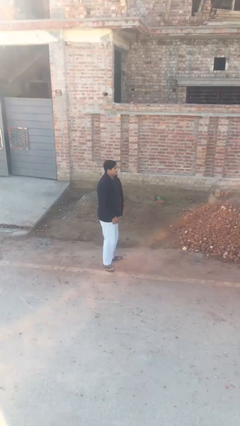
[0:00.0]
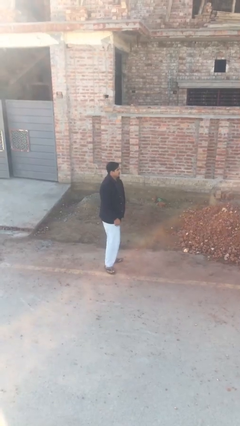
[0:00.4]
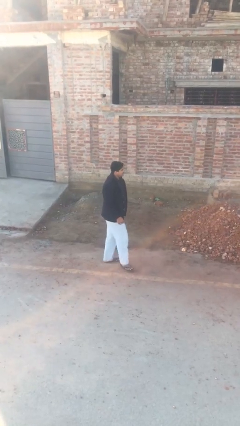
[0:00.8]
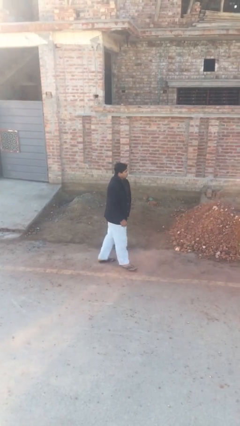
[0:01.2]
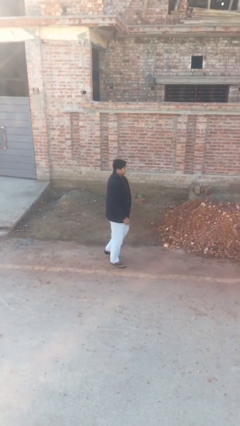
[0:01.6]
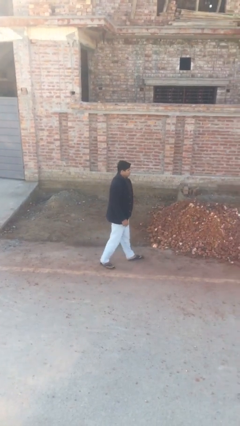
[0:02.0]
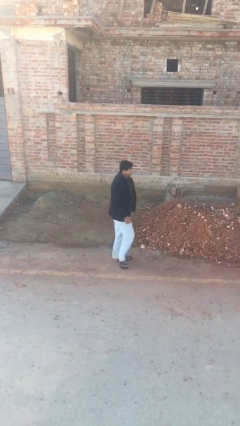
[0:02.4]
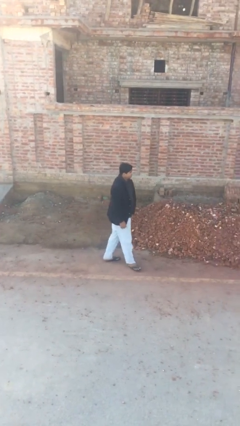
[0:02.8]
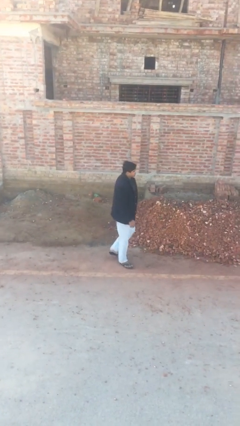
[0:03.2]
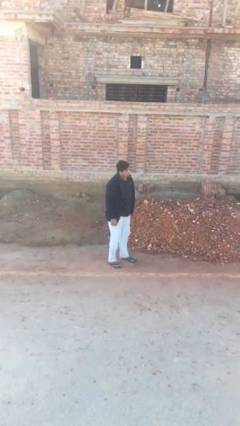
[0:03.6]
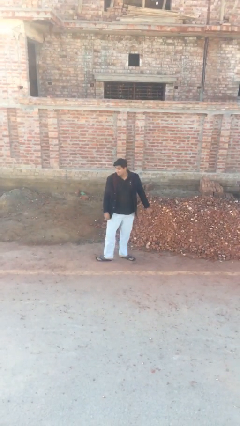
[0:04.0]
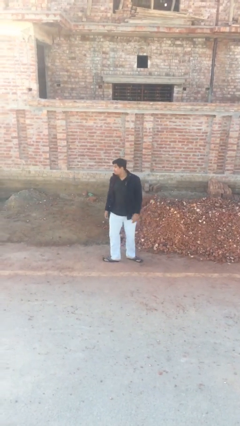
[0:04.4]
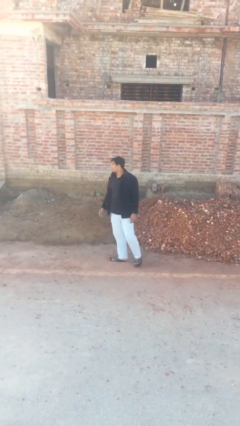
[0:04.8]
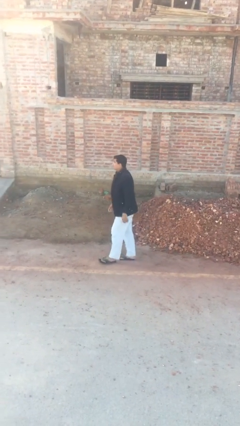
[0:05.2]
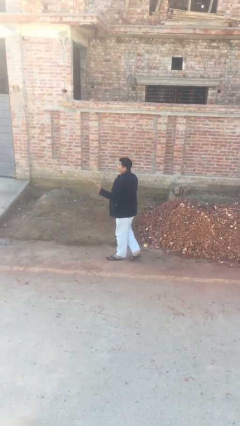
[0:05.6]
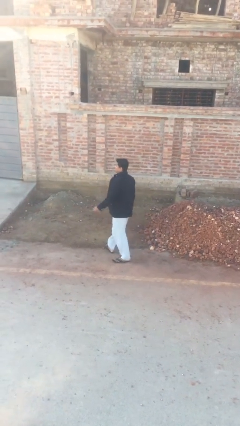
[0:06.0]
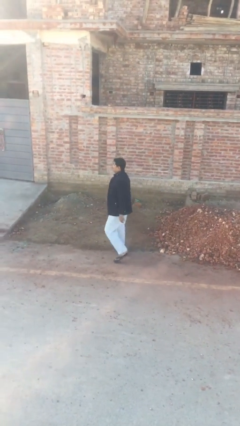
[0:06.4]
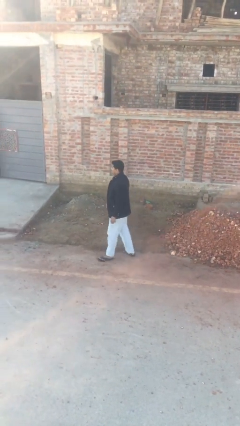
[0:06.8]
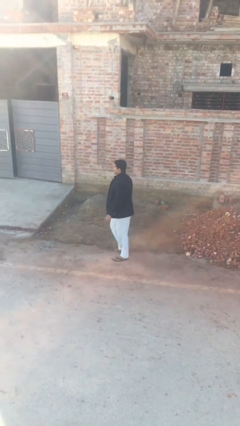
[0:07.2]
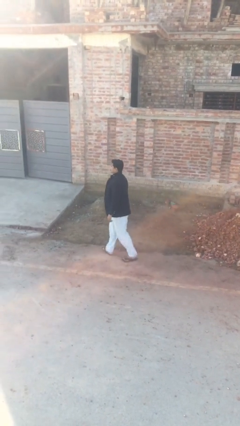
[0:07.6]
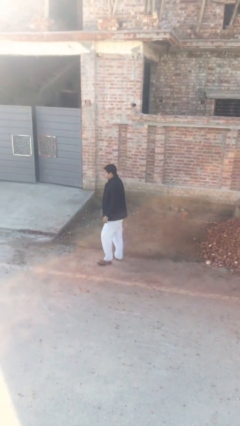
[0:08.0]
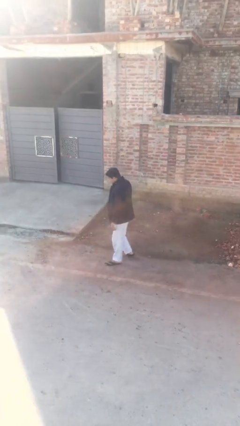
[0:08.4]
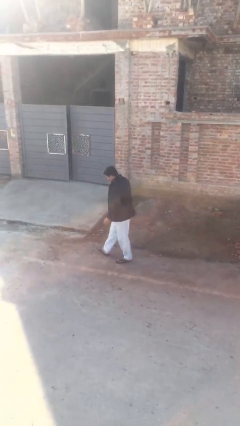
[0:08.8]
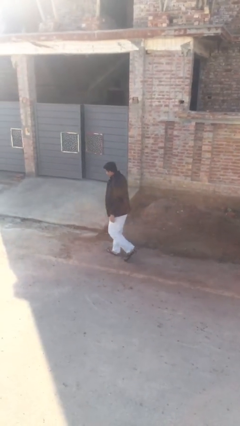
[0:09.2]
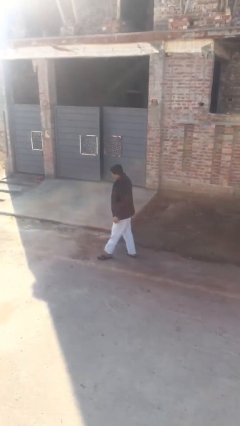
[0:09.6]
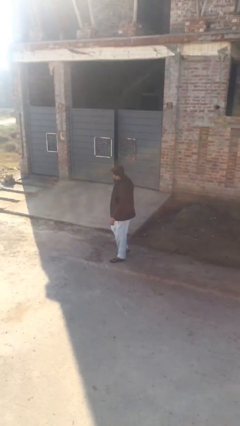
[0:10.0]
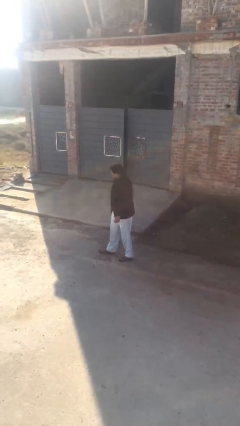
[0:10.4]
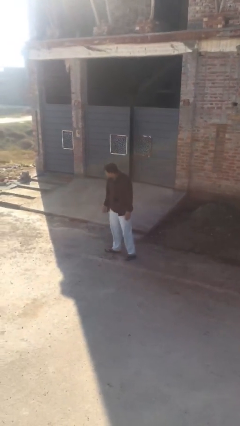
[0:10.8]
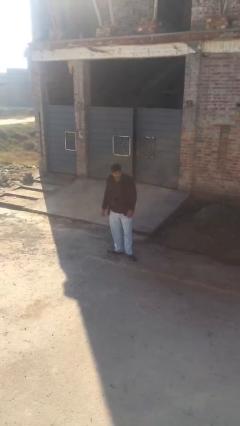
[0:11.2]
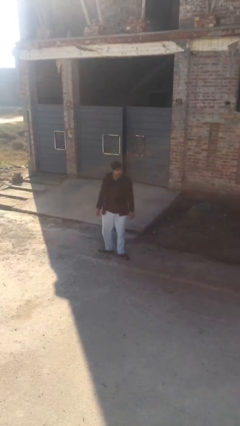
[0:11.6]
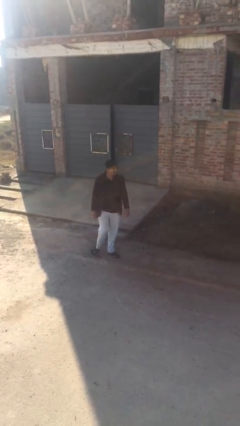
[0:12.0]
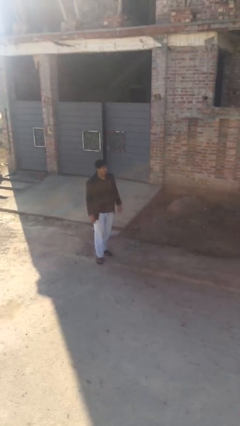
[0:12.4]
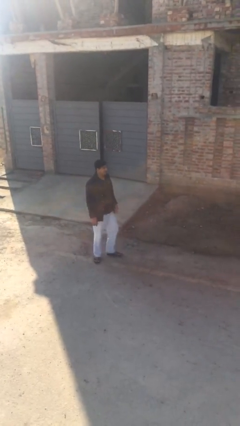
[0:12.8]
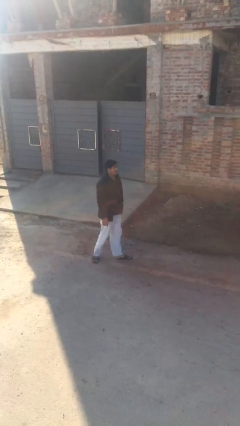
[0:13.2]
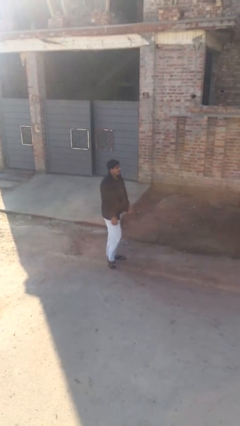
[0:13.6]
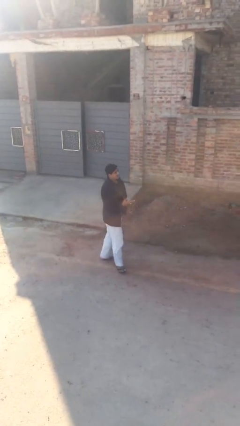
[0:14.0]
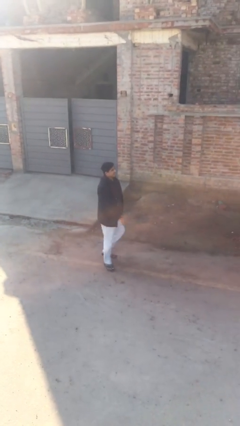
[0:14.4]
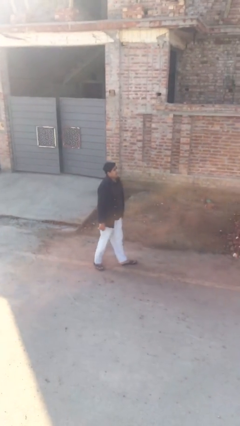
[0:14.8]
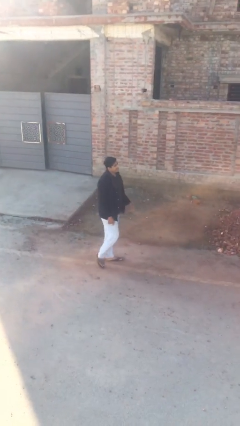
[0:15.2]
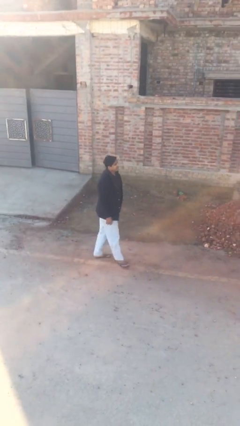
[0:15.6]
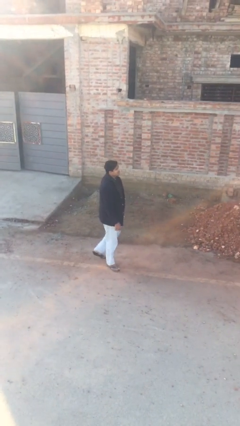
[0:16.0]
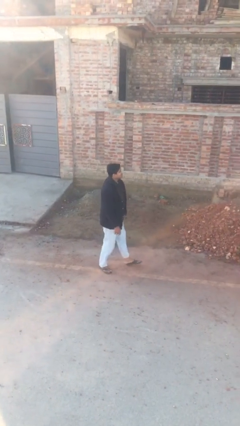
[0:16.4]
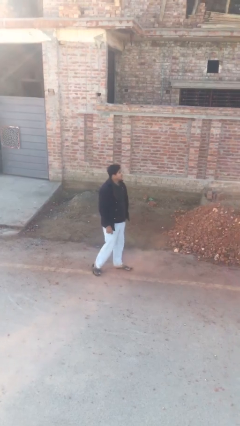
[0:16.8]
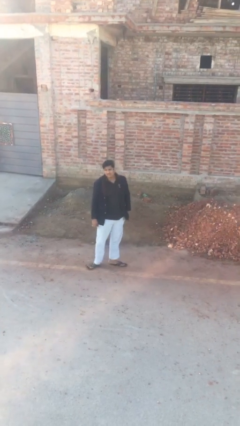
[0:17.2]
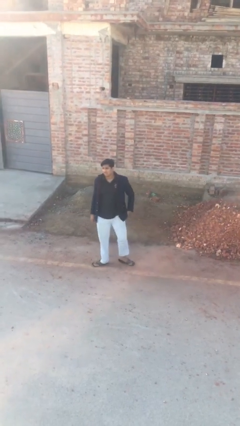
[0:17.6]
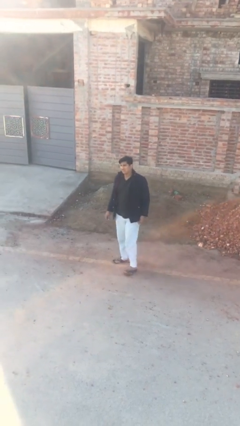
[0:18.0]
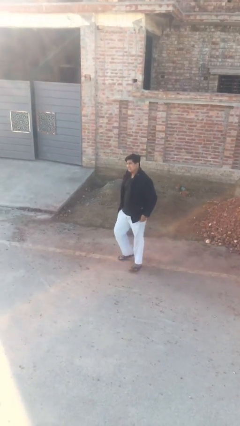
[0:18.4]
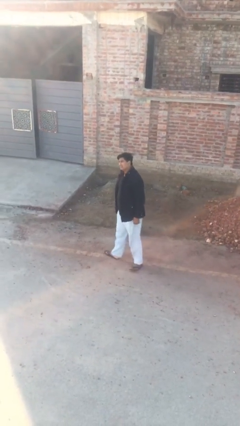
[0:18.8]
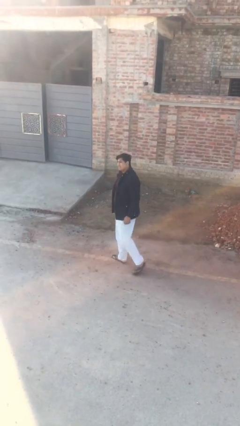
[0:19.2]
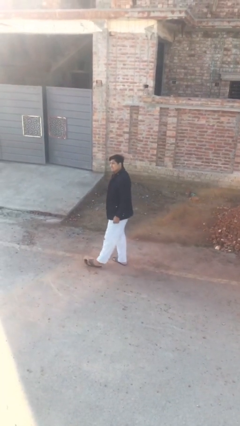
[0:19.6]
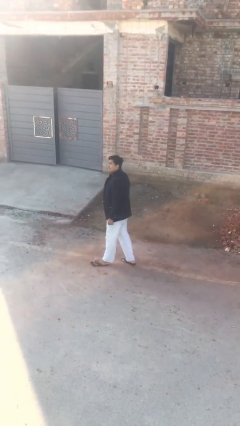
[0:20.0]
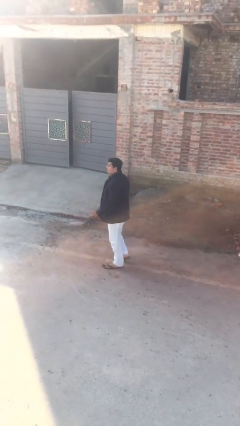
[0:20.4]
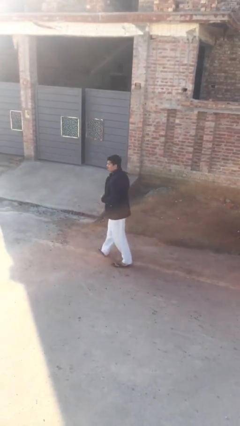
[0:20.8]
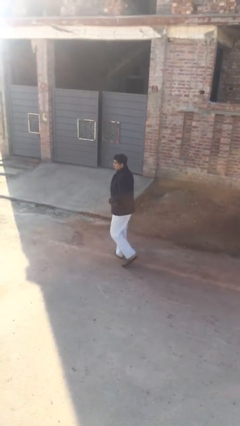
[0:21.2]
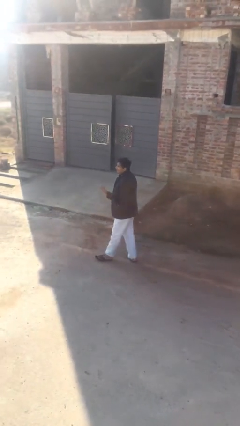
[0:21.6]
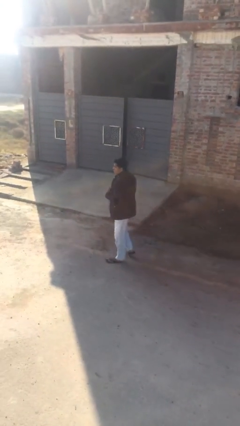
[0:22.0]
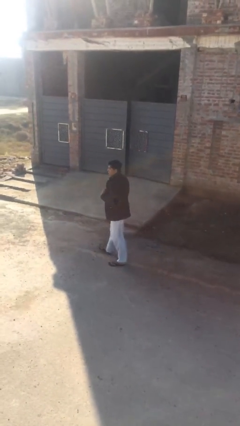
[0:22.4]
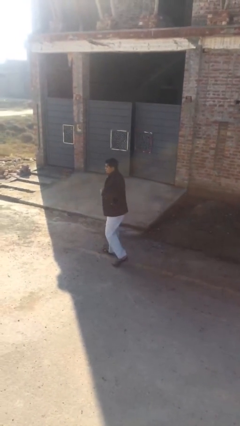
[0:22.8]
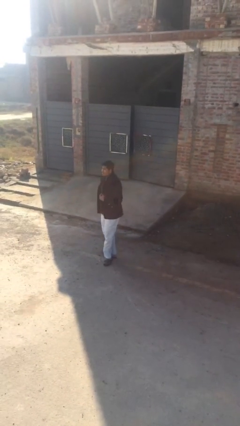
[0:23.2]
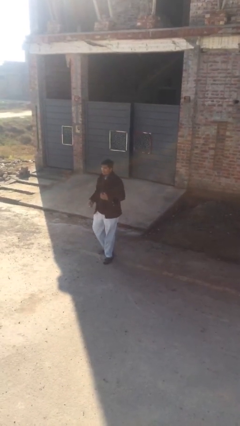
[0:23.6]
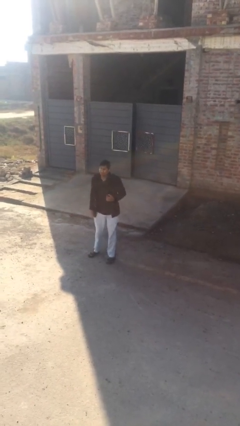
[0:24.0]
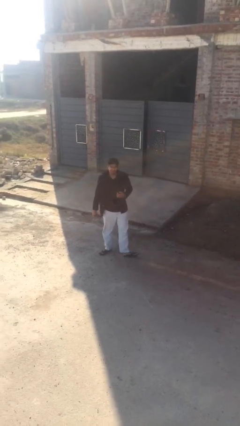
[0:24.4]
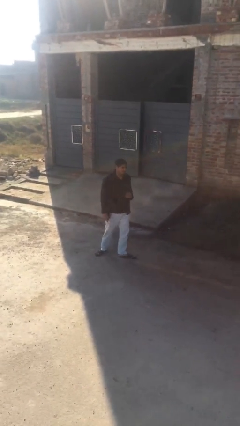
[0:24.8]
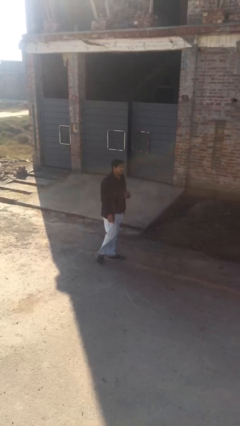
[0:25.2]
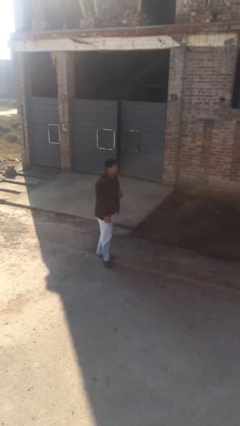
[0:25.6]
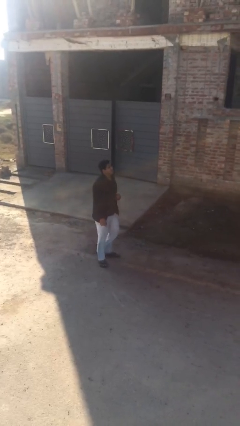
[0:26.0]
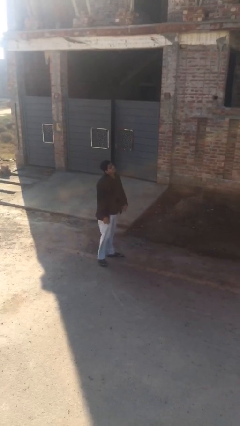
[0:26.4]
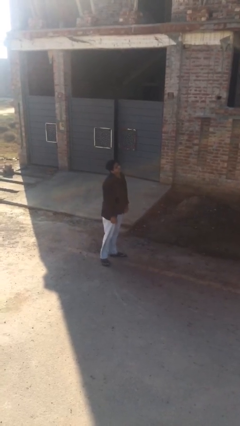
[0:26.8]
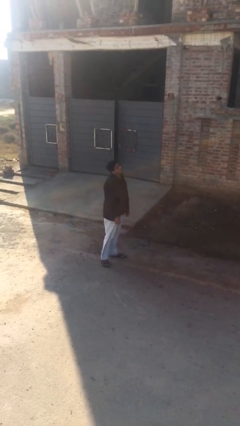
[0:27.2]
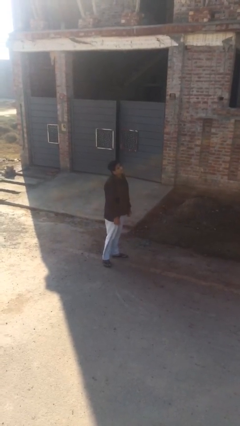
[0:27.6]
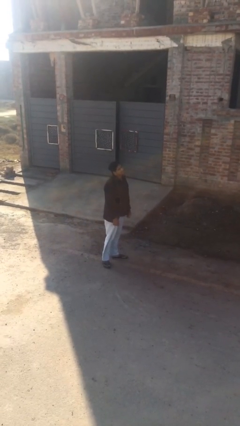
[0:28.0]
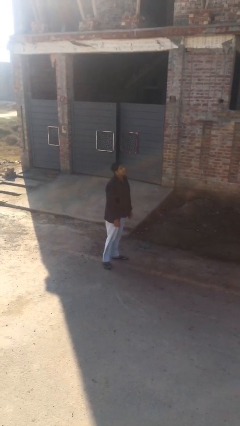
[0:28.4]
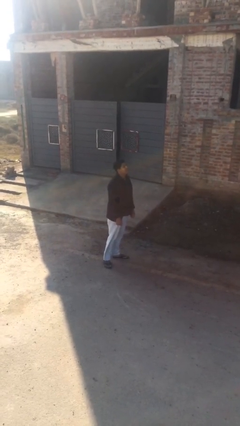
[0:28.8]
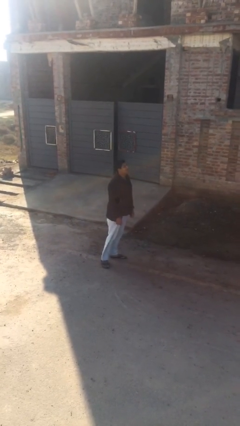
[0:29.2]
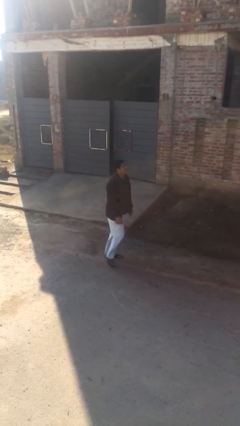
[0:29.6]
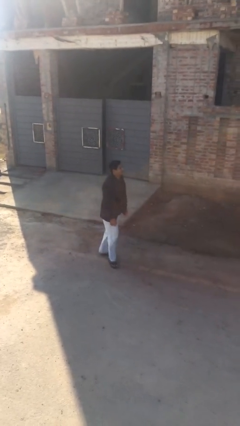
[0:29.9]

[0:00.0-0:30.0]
person walks

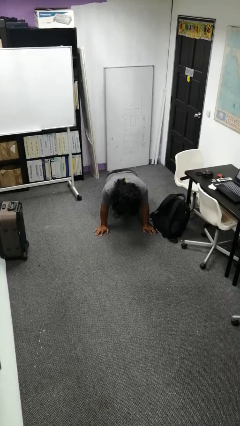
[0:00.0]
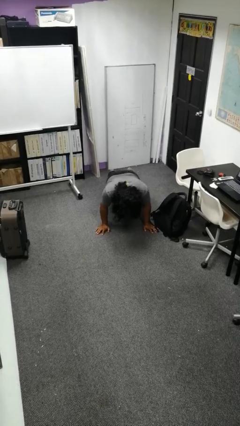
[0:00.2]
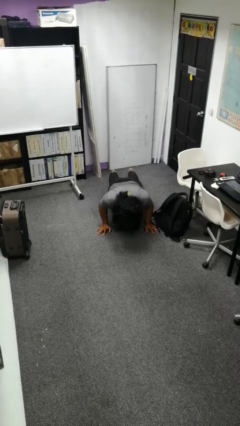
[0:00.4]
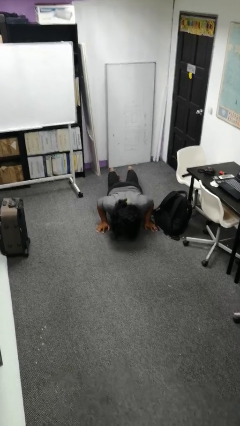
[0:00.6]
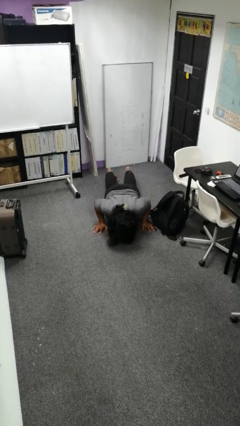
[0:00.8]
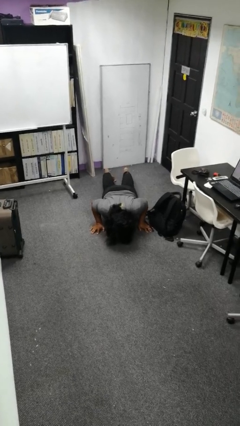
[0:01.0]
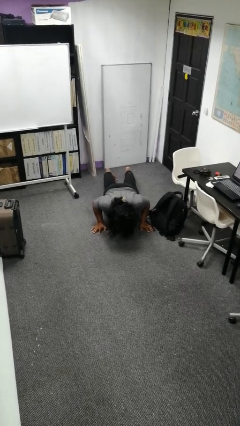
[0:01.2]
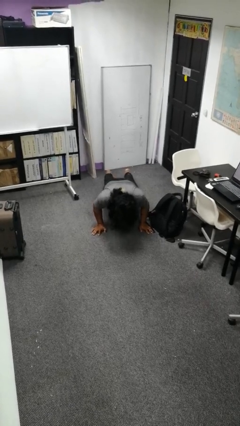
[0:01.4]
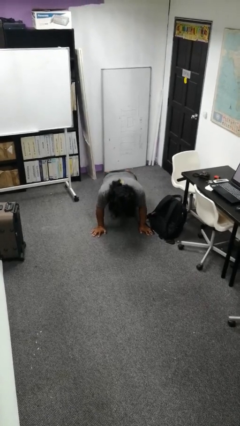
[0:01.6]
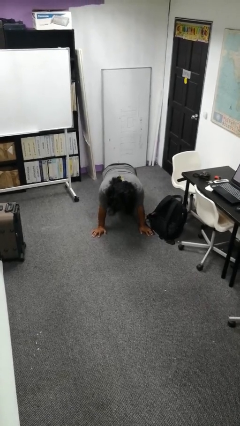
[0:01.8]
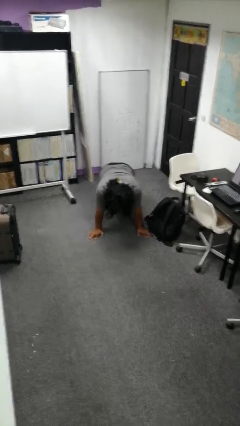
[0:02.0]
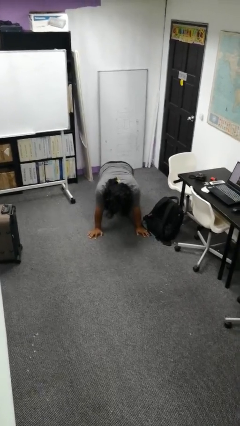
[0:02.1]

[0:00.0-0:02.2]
person exercises with pushup

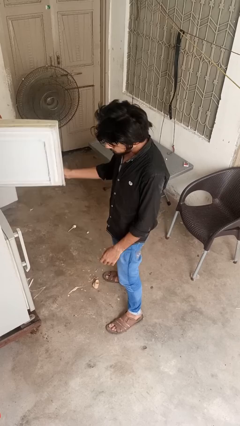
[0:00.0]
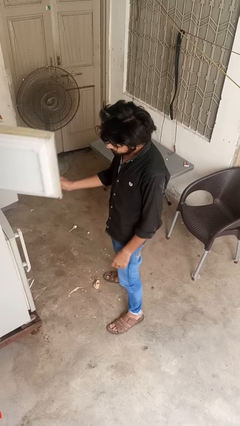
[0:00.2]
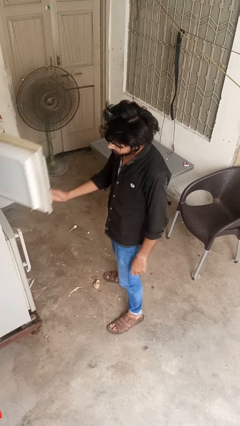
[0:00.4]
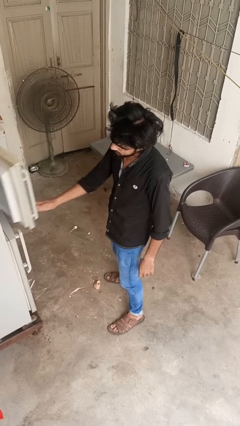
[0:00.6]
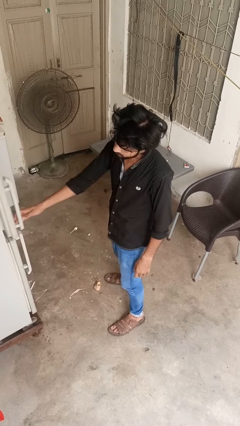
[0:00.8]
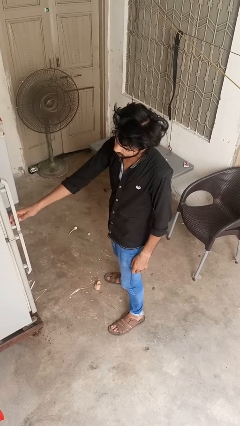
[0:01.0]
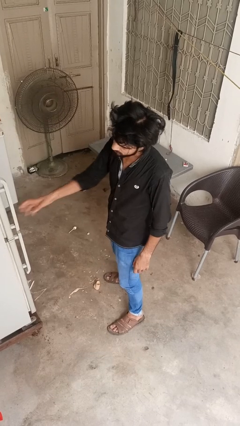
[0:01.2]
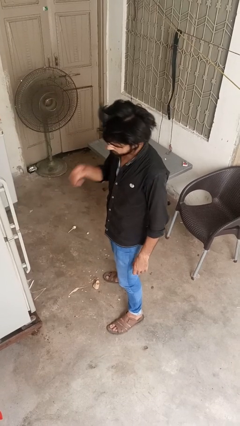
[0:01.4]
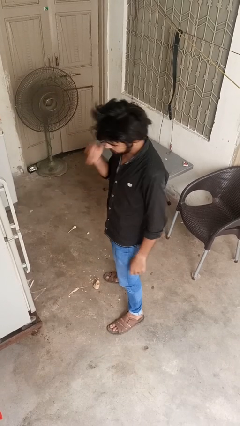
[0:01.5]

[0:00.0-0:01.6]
person closes refrigerator
